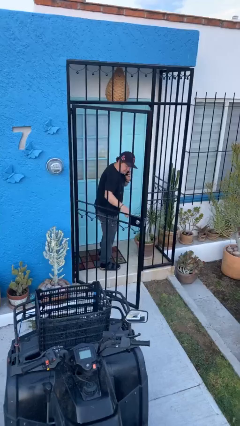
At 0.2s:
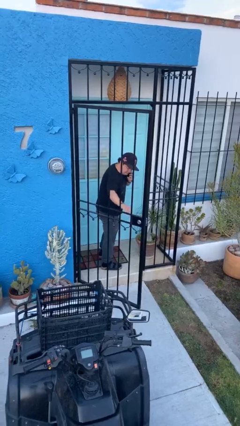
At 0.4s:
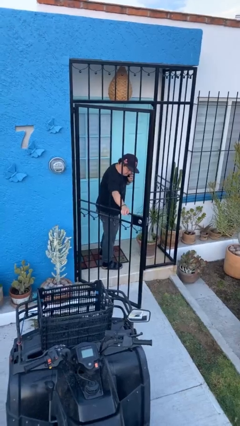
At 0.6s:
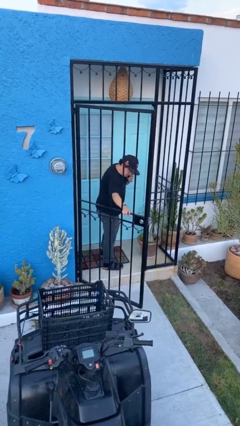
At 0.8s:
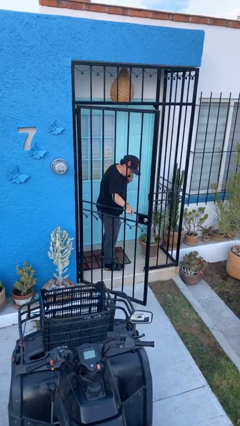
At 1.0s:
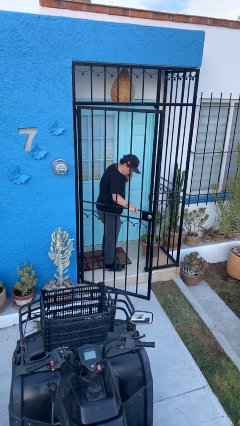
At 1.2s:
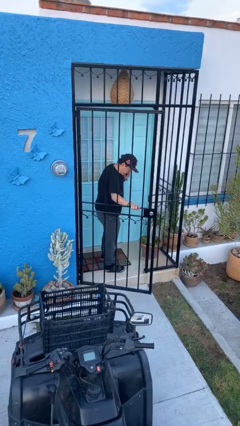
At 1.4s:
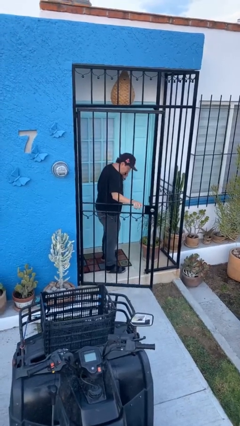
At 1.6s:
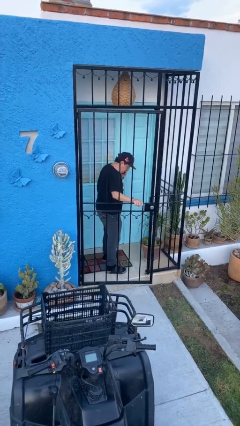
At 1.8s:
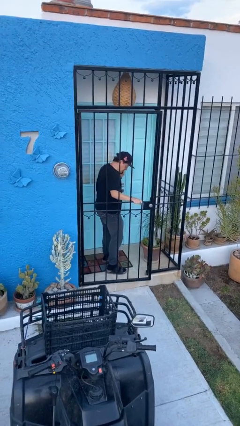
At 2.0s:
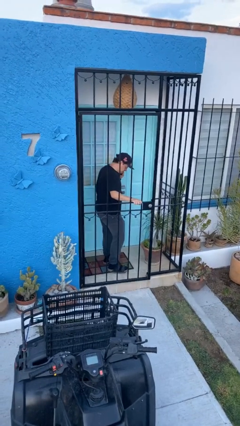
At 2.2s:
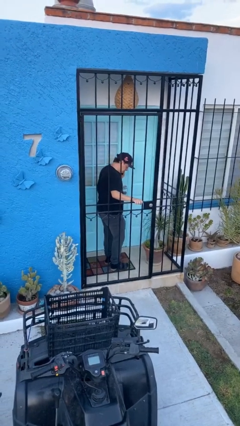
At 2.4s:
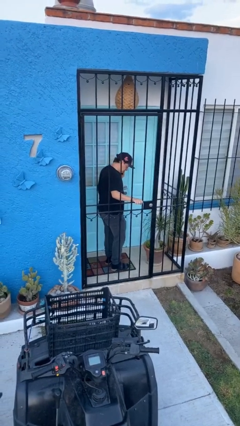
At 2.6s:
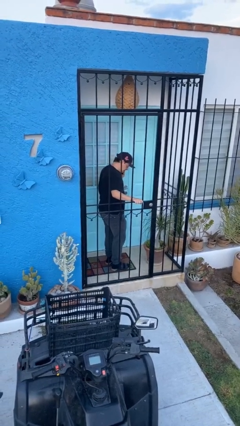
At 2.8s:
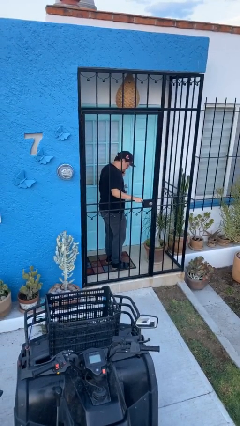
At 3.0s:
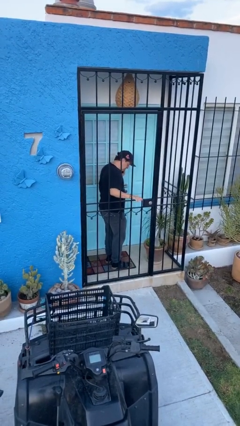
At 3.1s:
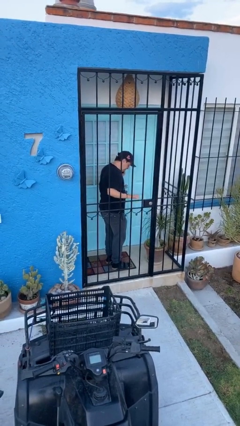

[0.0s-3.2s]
person closes facility door

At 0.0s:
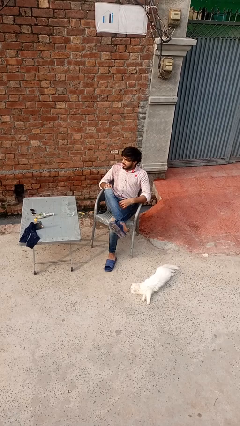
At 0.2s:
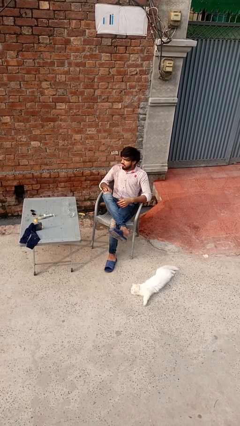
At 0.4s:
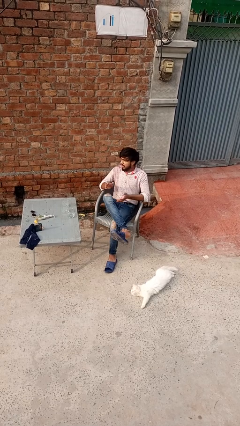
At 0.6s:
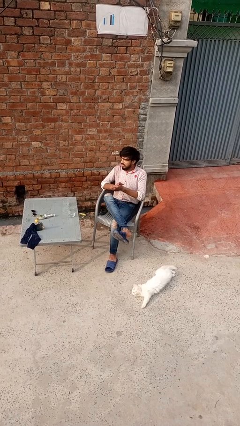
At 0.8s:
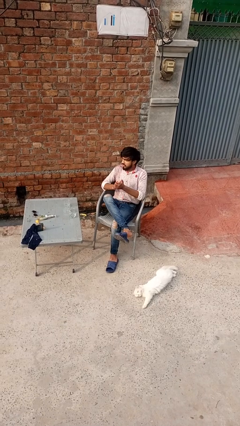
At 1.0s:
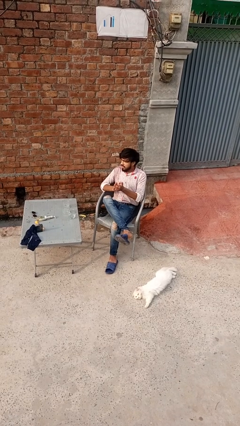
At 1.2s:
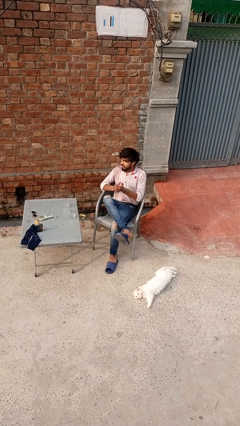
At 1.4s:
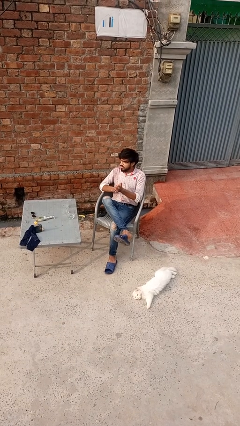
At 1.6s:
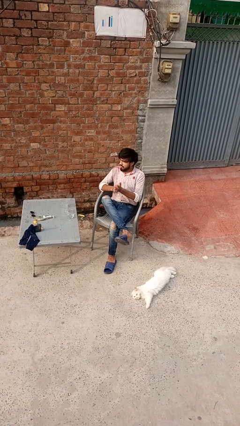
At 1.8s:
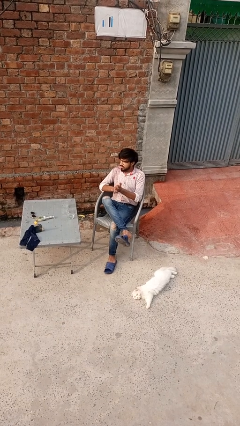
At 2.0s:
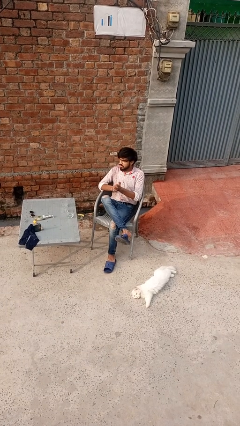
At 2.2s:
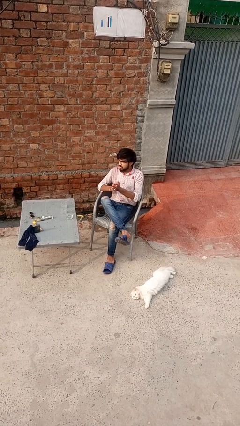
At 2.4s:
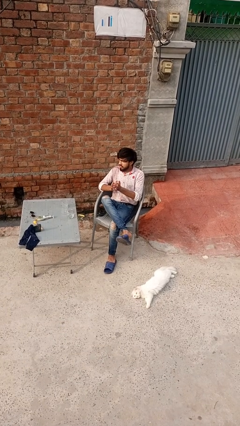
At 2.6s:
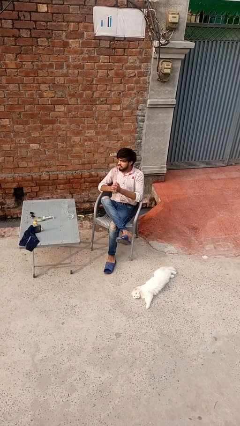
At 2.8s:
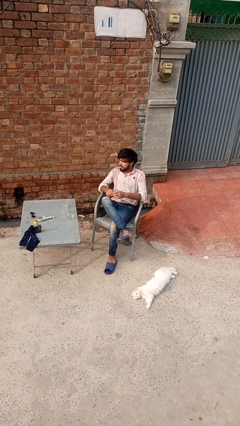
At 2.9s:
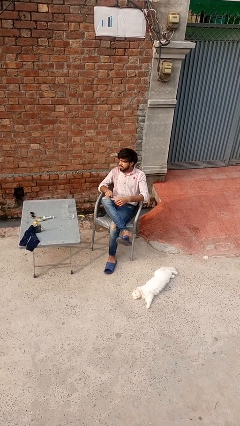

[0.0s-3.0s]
person claps hands

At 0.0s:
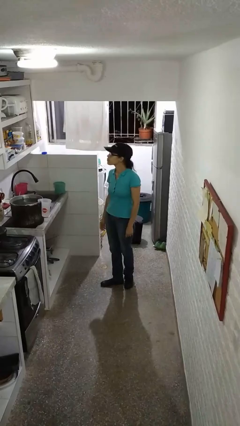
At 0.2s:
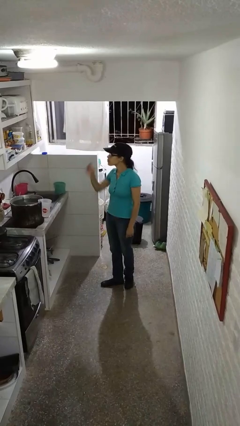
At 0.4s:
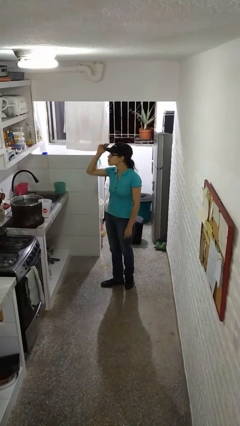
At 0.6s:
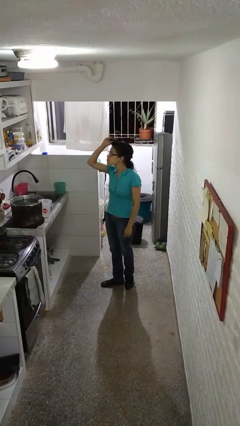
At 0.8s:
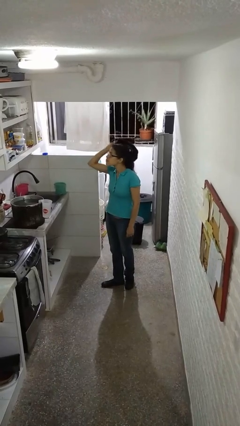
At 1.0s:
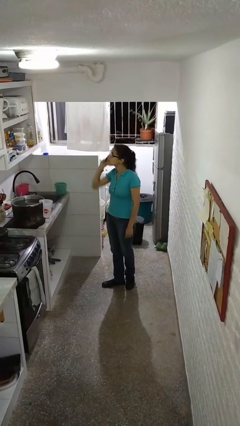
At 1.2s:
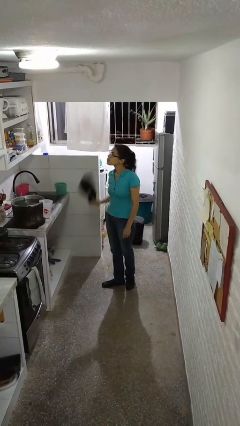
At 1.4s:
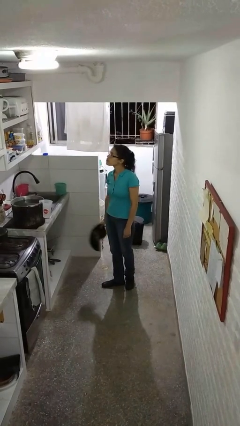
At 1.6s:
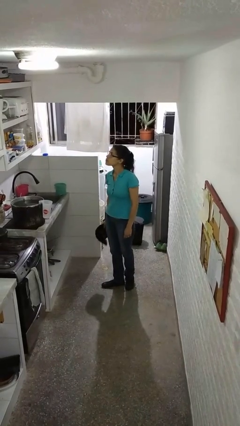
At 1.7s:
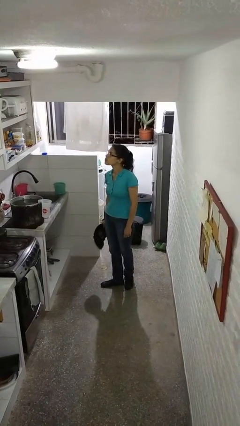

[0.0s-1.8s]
person takes off hat

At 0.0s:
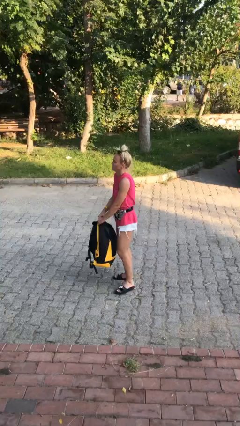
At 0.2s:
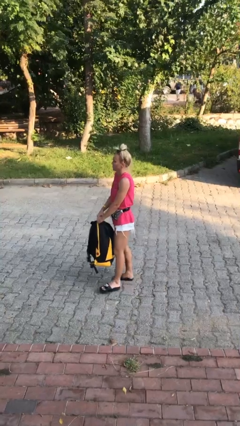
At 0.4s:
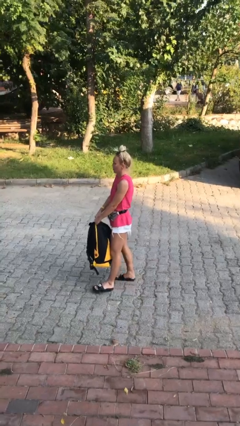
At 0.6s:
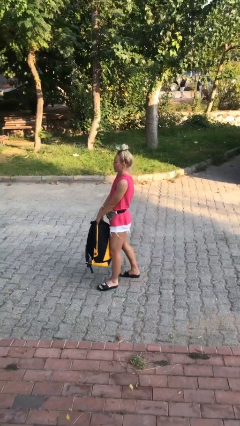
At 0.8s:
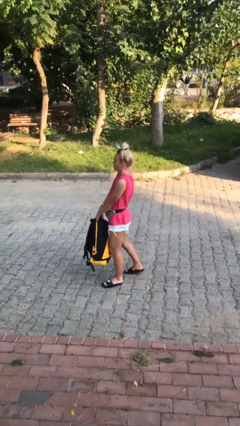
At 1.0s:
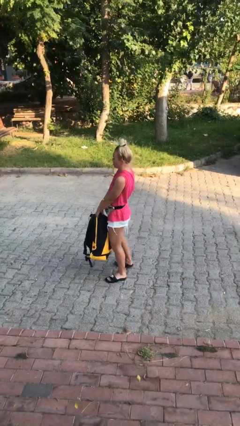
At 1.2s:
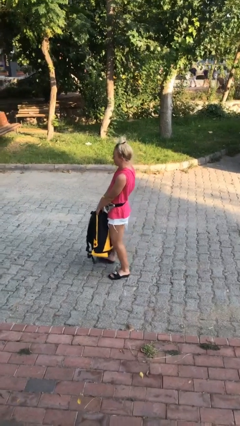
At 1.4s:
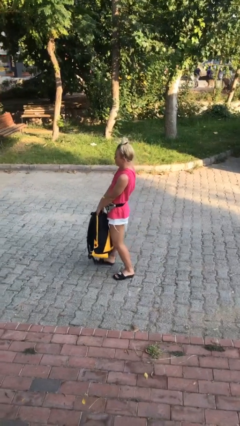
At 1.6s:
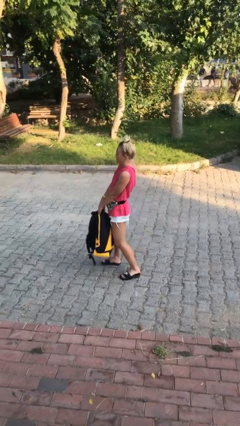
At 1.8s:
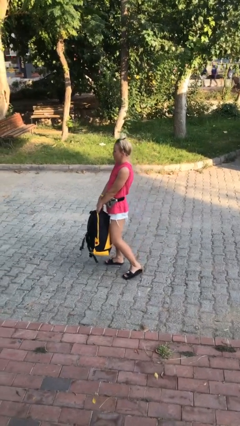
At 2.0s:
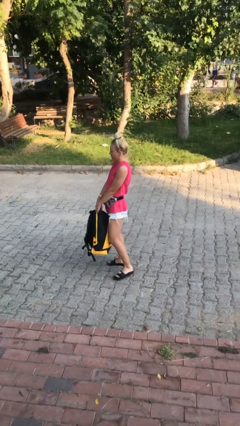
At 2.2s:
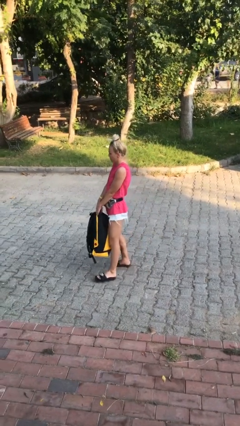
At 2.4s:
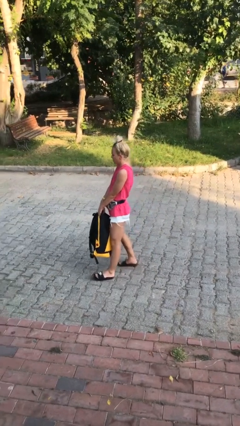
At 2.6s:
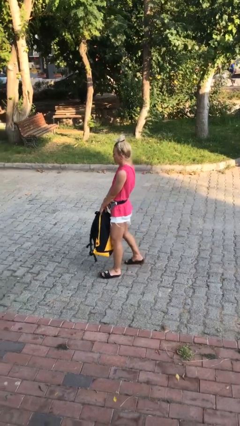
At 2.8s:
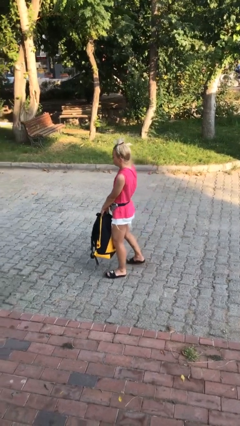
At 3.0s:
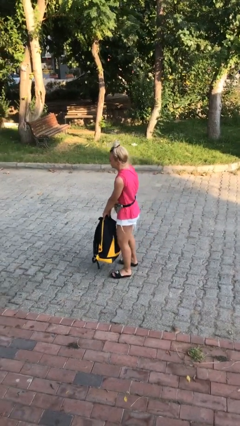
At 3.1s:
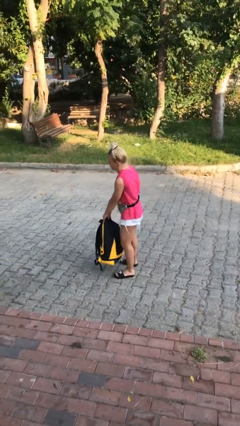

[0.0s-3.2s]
person carries heavy object

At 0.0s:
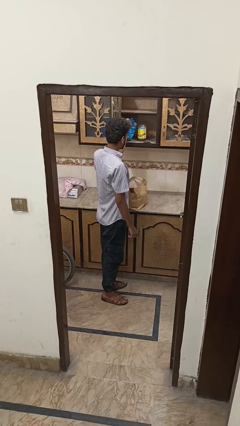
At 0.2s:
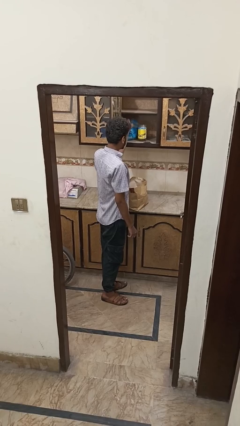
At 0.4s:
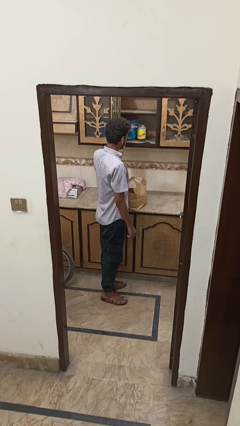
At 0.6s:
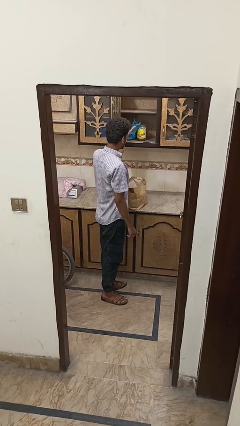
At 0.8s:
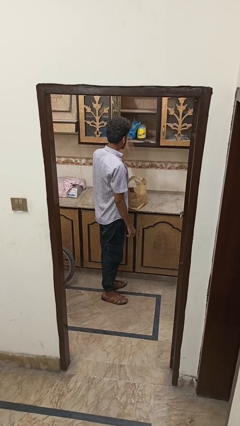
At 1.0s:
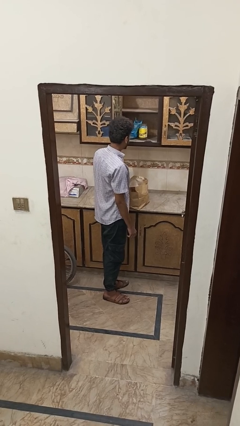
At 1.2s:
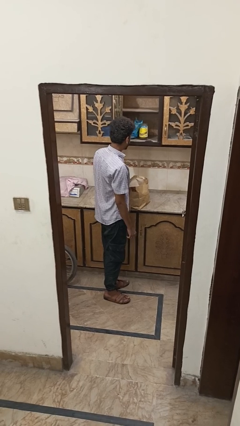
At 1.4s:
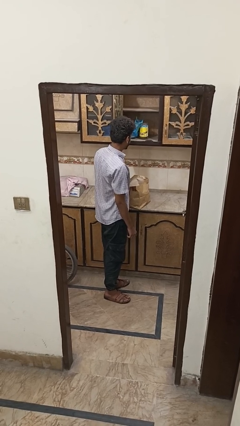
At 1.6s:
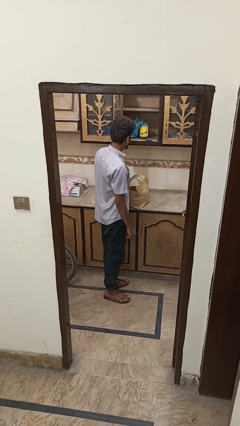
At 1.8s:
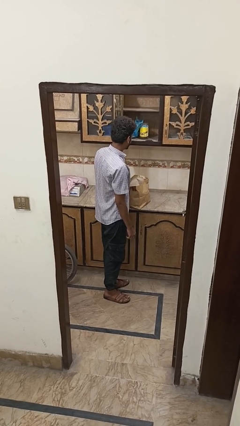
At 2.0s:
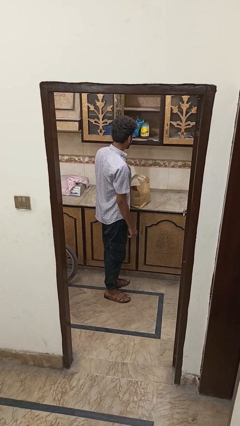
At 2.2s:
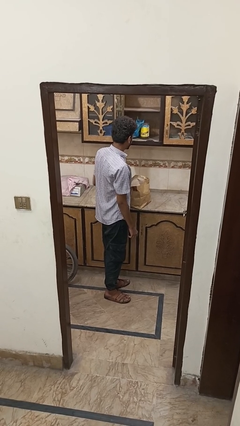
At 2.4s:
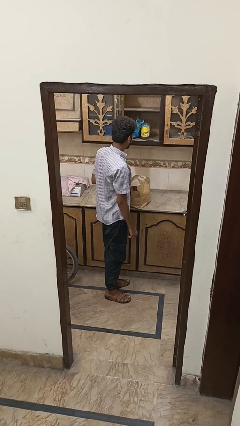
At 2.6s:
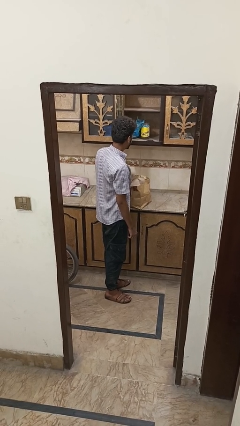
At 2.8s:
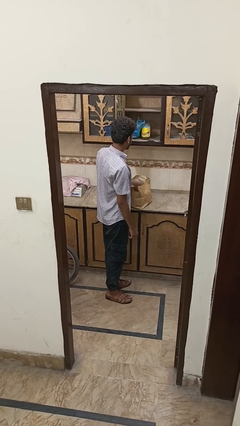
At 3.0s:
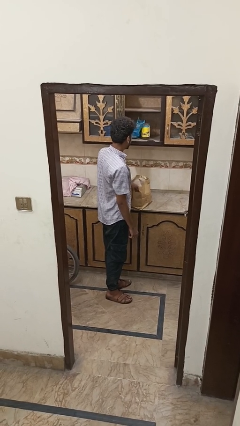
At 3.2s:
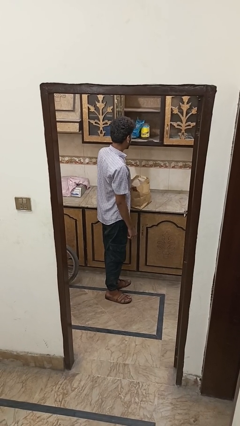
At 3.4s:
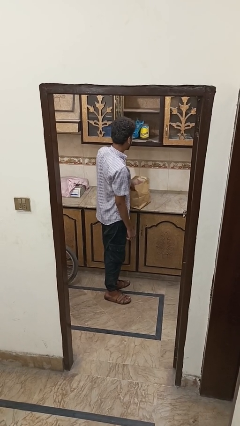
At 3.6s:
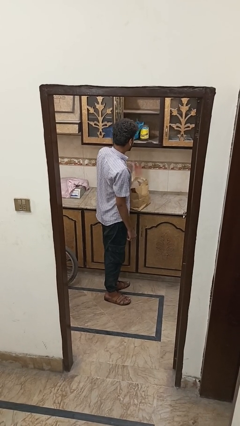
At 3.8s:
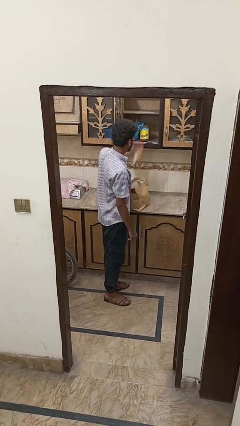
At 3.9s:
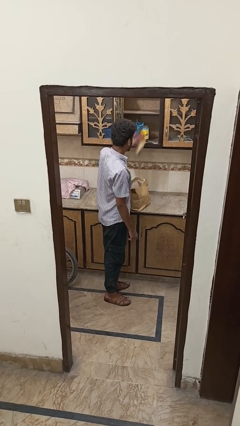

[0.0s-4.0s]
person covers with bedsheets

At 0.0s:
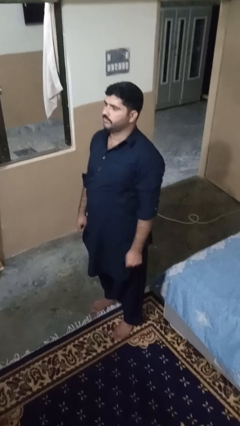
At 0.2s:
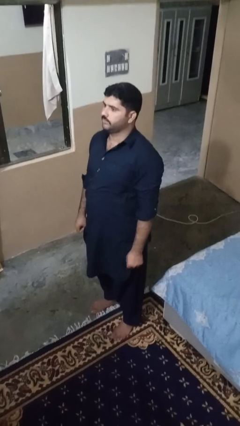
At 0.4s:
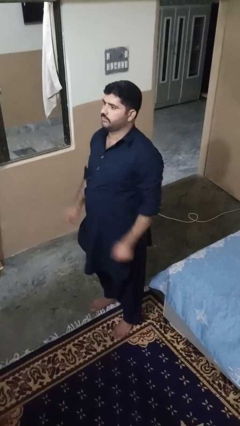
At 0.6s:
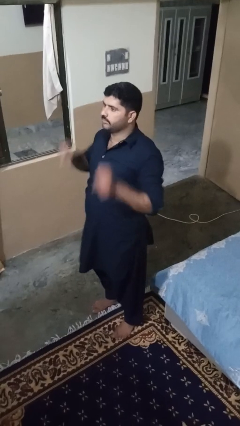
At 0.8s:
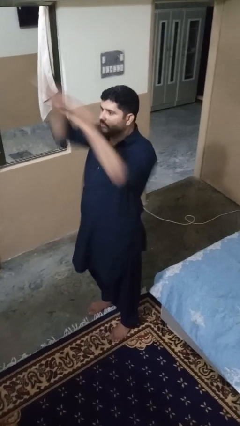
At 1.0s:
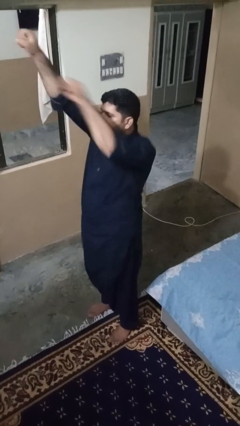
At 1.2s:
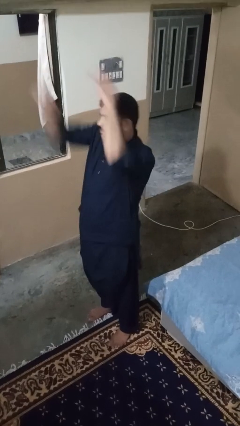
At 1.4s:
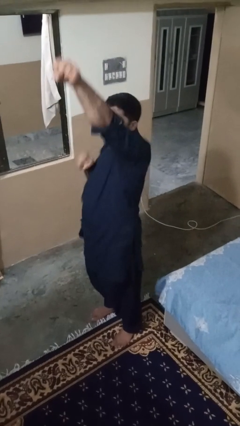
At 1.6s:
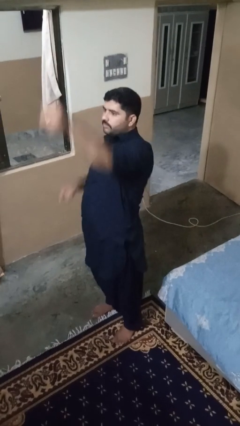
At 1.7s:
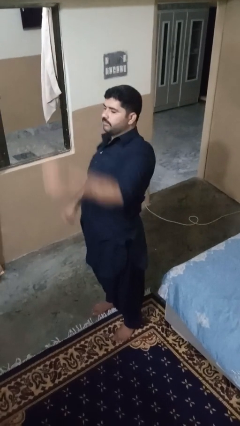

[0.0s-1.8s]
person punches
